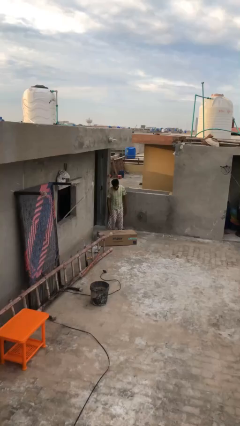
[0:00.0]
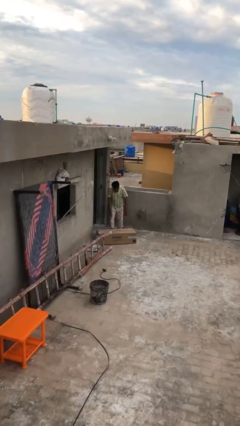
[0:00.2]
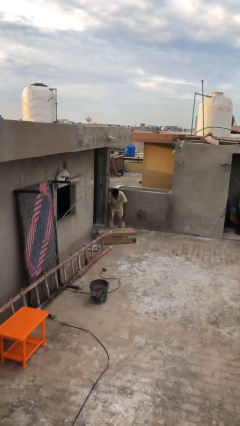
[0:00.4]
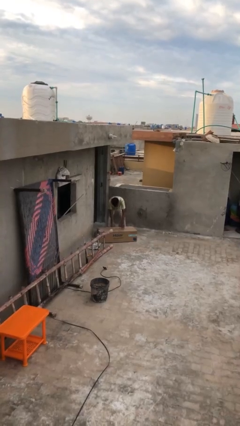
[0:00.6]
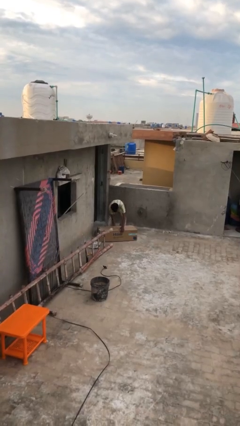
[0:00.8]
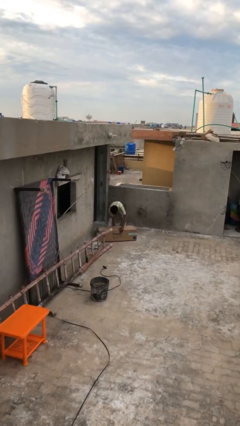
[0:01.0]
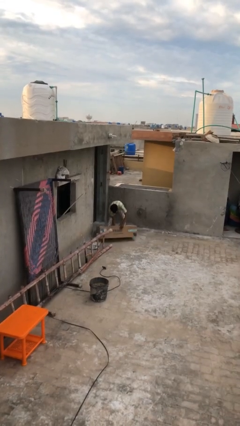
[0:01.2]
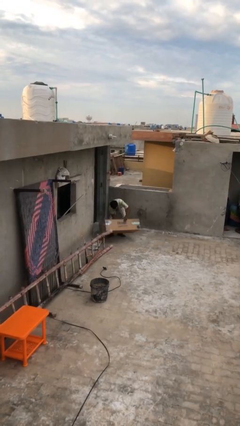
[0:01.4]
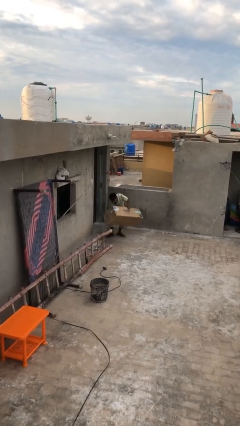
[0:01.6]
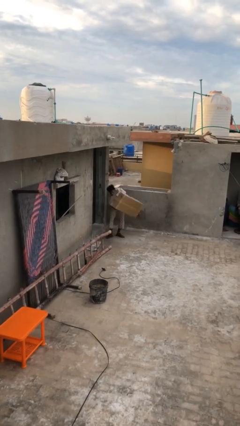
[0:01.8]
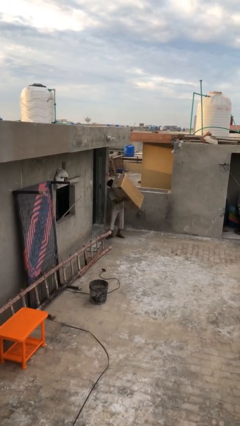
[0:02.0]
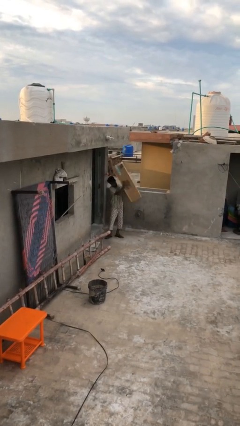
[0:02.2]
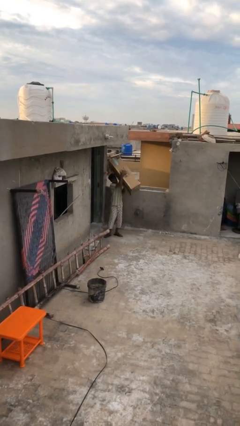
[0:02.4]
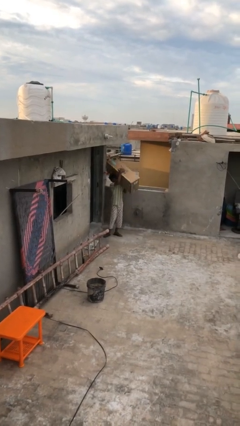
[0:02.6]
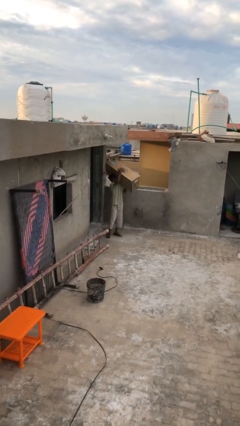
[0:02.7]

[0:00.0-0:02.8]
person picks up object from floor

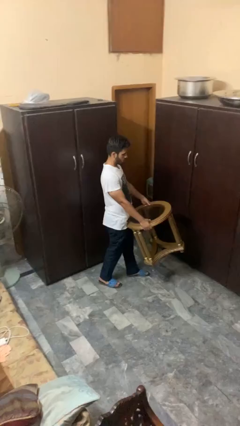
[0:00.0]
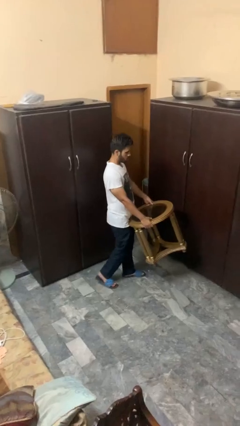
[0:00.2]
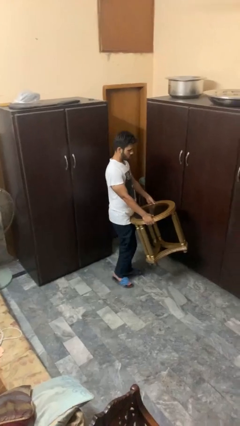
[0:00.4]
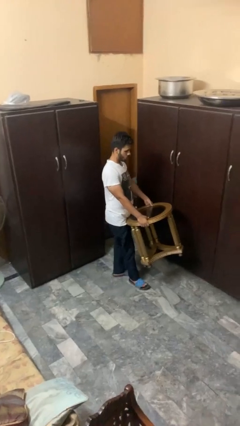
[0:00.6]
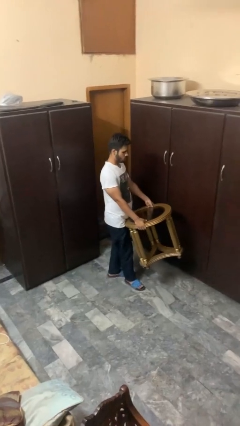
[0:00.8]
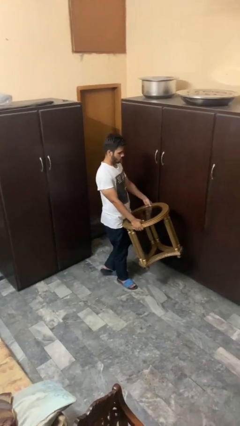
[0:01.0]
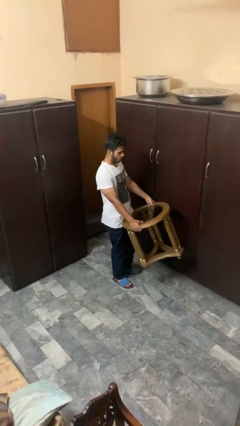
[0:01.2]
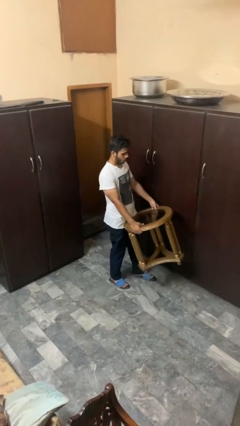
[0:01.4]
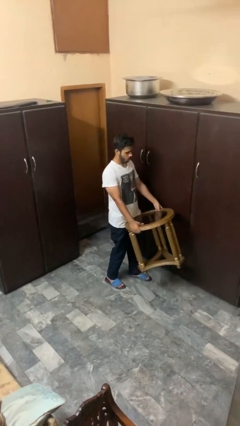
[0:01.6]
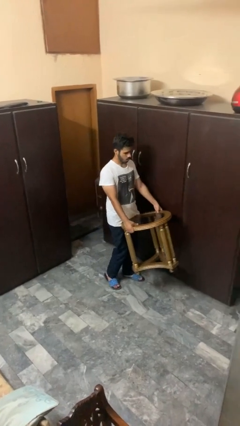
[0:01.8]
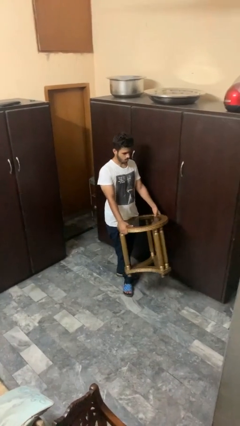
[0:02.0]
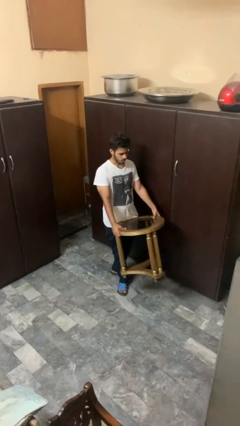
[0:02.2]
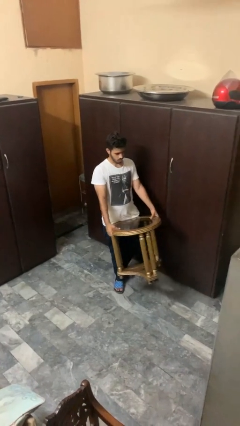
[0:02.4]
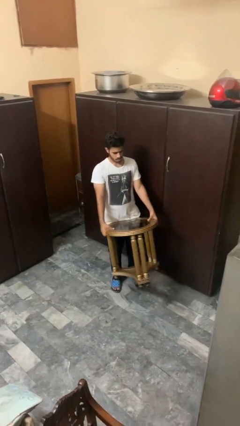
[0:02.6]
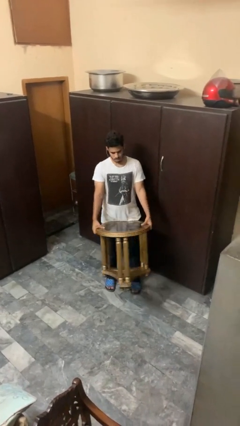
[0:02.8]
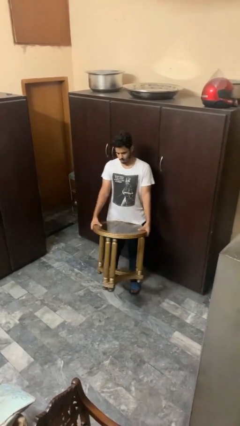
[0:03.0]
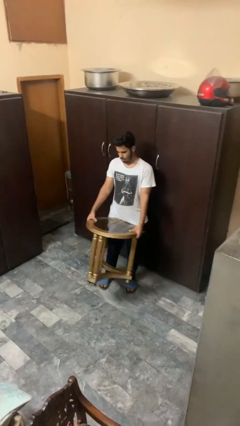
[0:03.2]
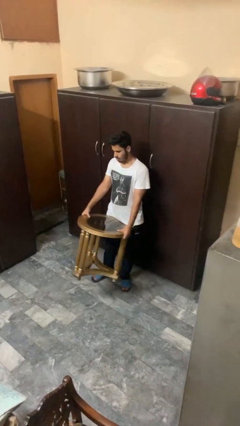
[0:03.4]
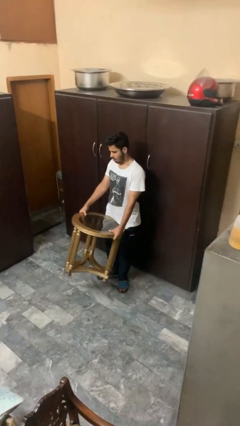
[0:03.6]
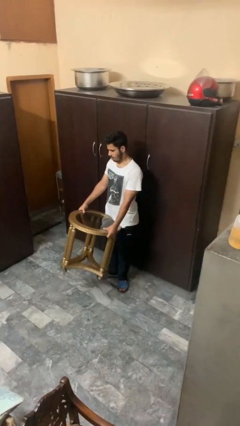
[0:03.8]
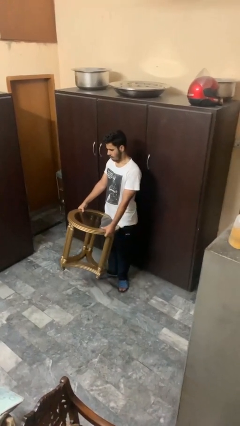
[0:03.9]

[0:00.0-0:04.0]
person carries furniture

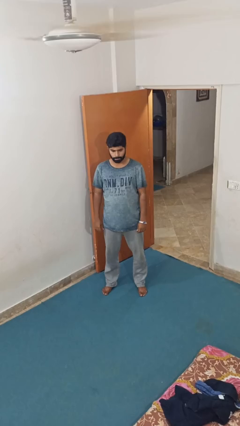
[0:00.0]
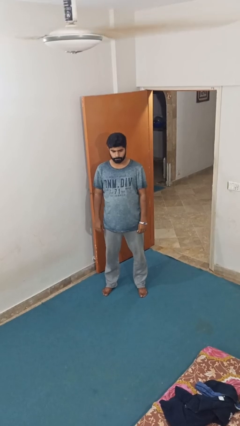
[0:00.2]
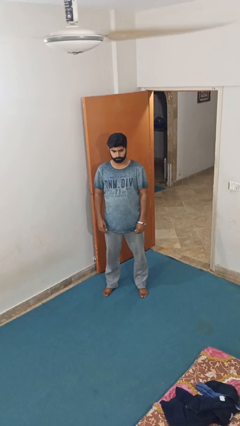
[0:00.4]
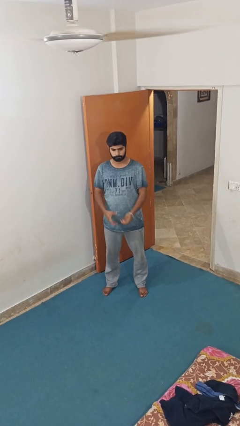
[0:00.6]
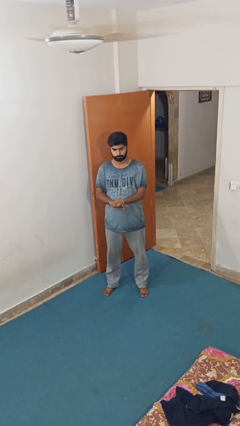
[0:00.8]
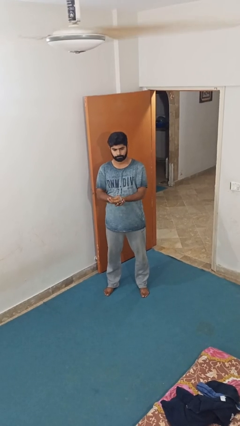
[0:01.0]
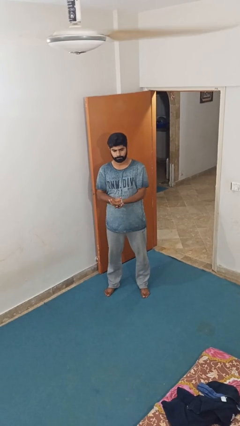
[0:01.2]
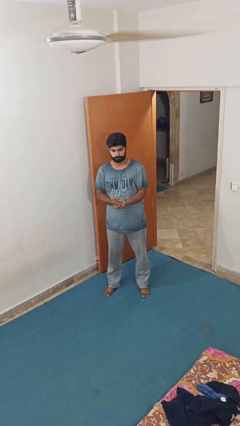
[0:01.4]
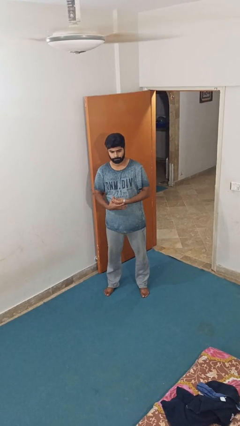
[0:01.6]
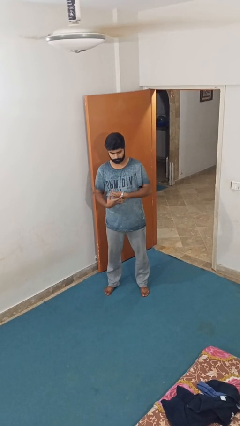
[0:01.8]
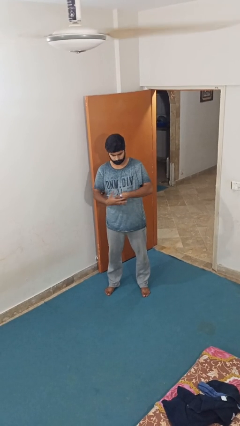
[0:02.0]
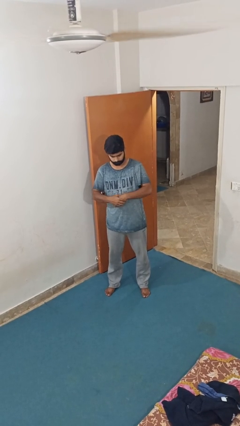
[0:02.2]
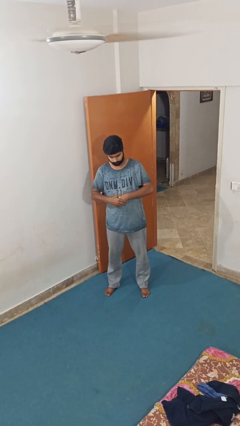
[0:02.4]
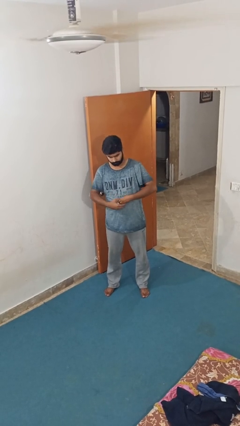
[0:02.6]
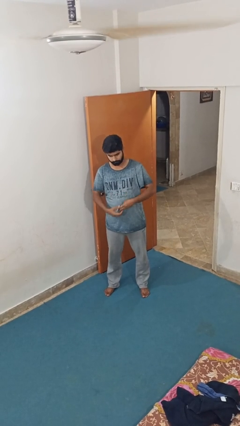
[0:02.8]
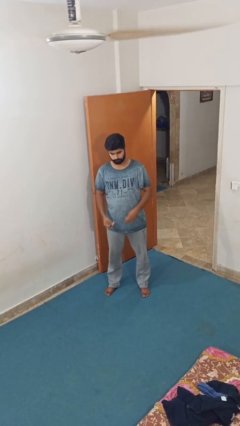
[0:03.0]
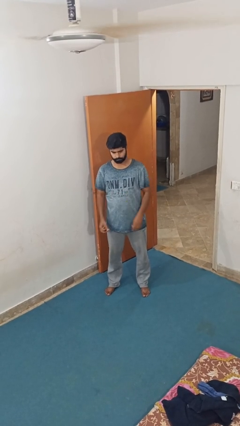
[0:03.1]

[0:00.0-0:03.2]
person takes off wristwatch

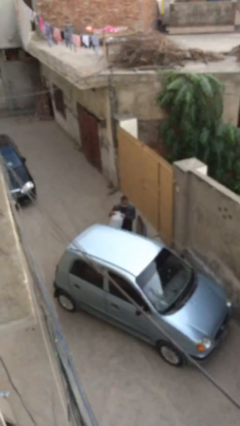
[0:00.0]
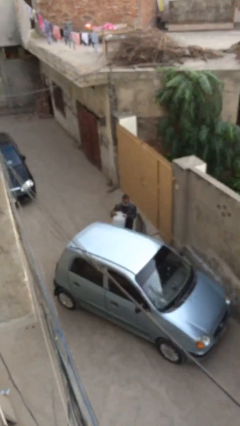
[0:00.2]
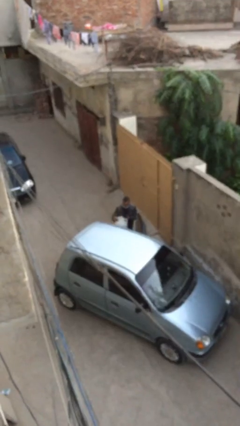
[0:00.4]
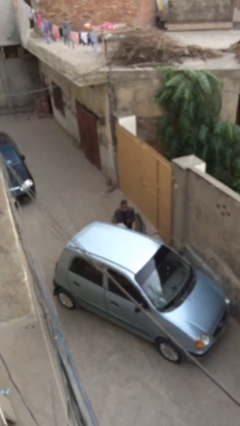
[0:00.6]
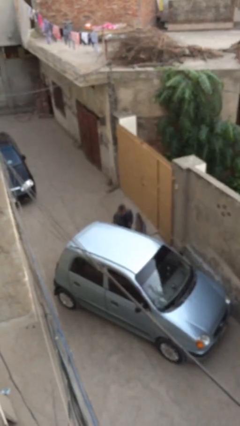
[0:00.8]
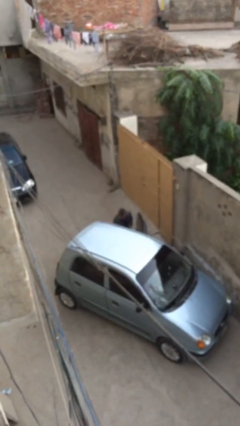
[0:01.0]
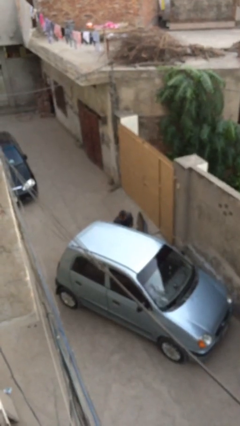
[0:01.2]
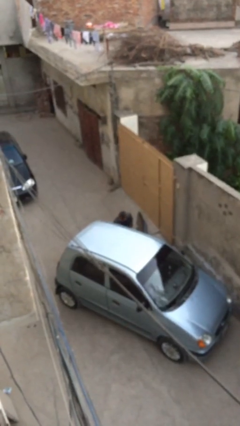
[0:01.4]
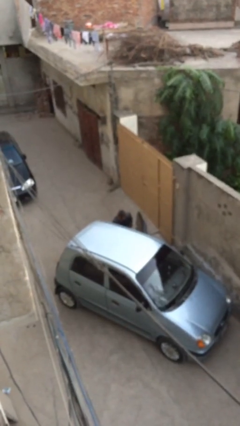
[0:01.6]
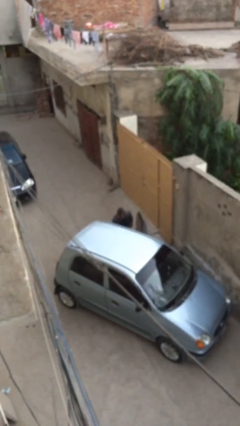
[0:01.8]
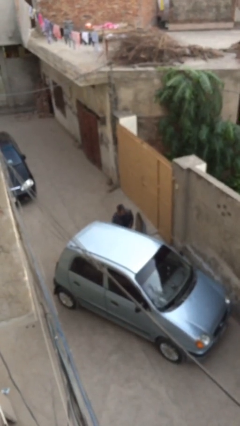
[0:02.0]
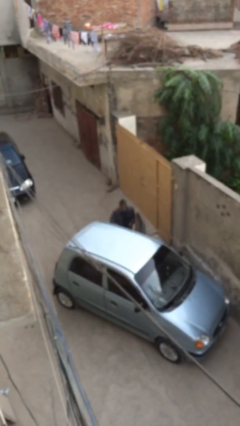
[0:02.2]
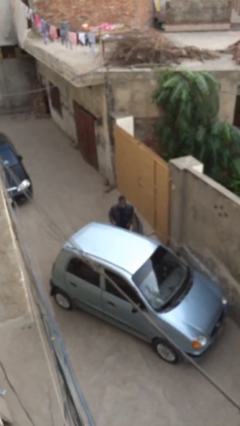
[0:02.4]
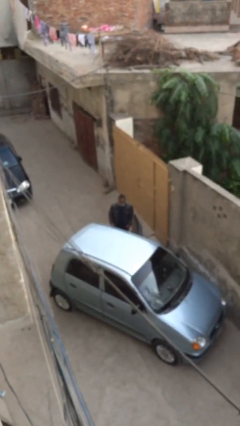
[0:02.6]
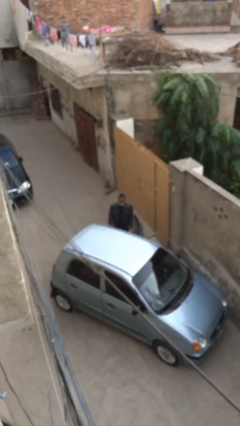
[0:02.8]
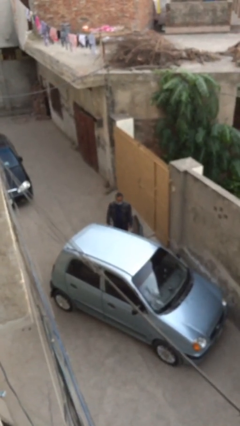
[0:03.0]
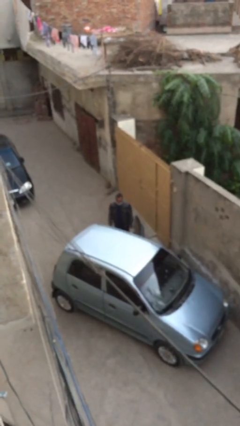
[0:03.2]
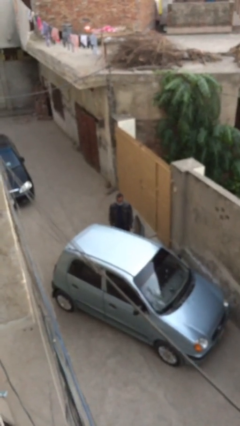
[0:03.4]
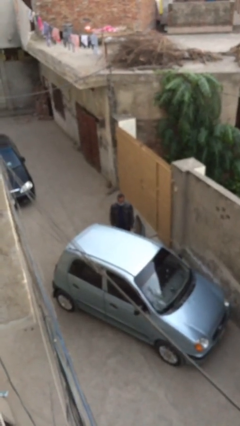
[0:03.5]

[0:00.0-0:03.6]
person loads car

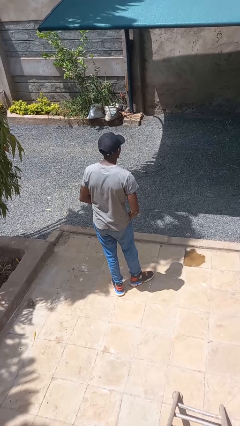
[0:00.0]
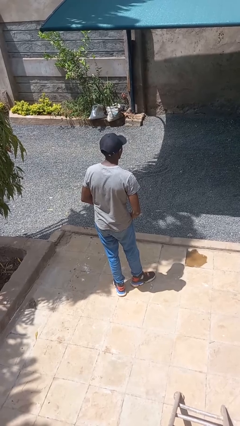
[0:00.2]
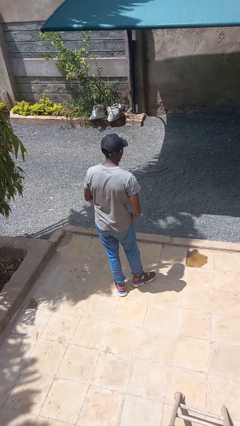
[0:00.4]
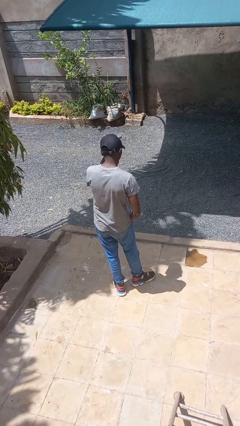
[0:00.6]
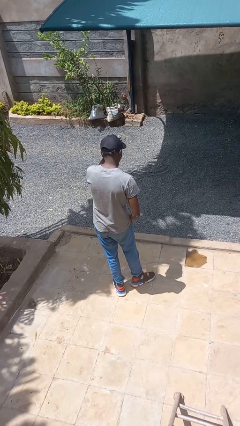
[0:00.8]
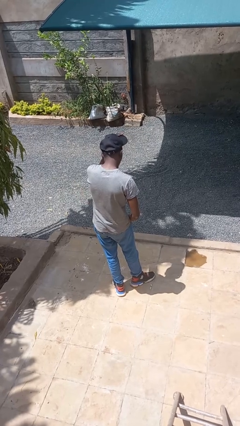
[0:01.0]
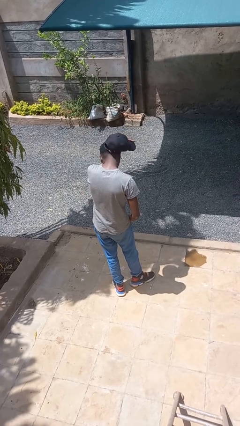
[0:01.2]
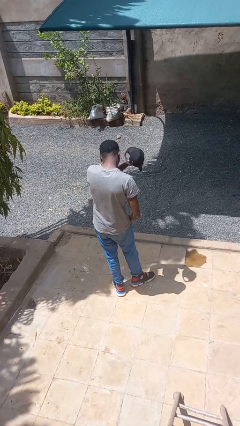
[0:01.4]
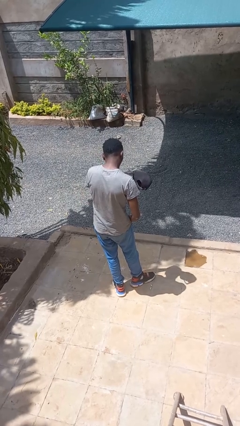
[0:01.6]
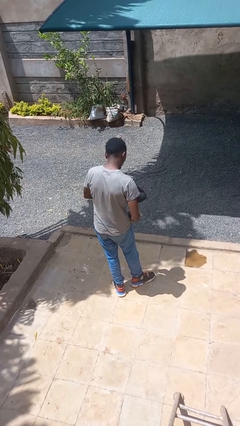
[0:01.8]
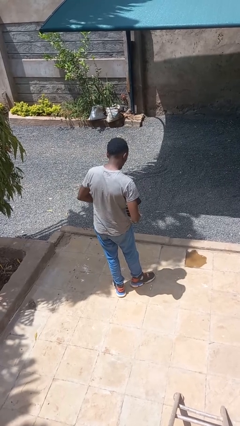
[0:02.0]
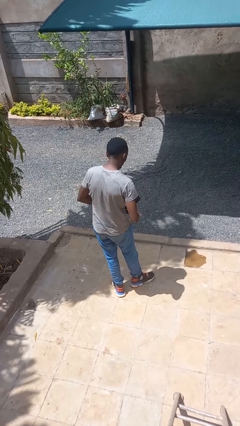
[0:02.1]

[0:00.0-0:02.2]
person takes off hat

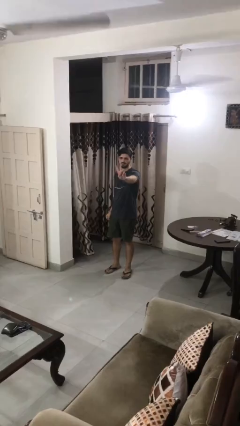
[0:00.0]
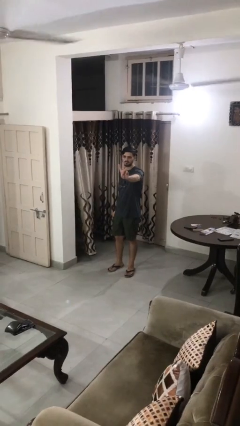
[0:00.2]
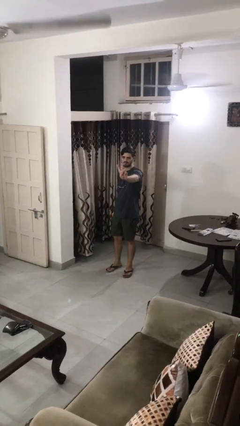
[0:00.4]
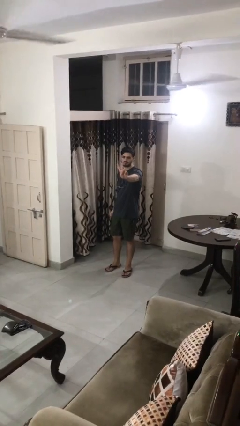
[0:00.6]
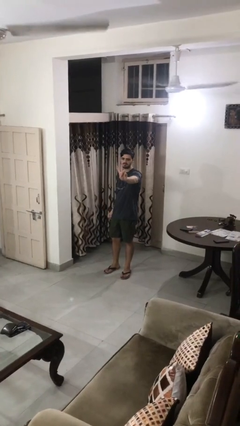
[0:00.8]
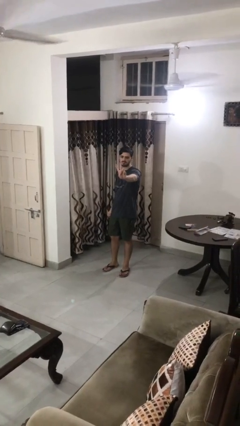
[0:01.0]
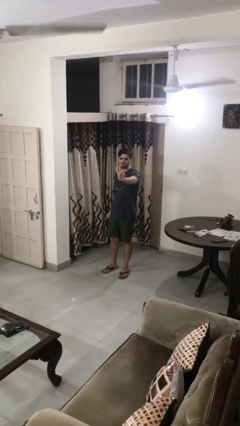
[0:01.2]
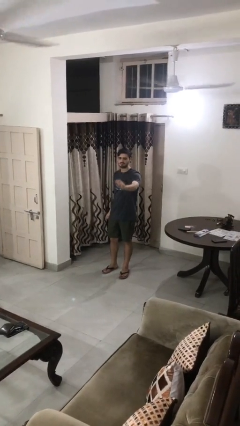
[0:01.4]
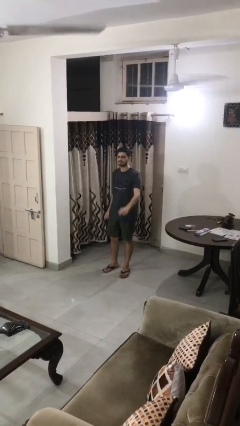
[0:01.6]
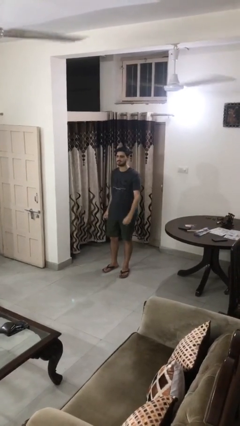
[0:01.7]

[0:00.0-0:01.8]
person gestures peace
